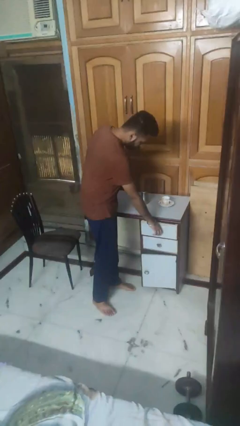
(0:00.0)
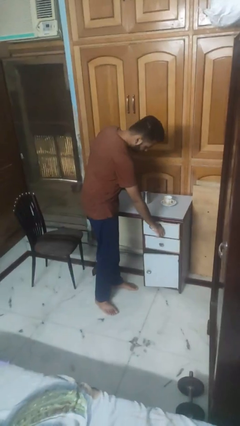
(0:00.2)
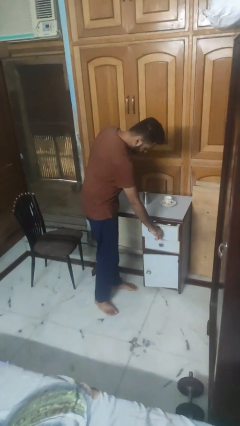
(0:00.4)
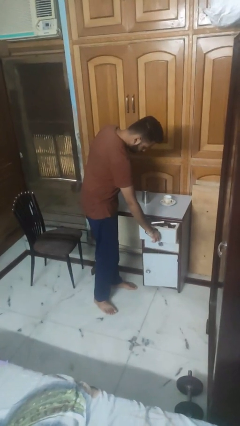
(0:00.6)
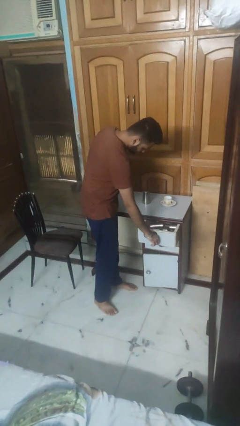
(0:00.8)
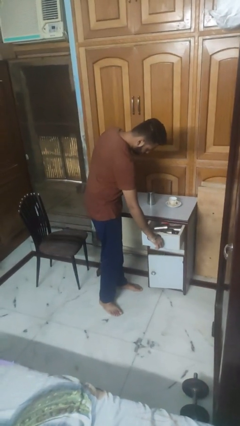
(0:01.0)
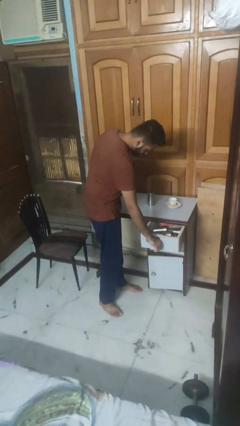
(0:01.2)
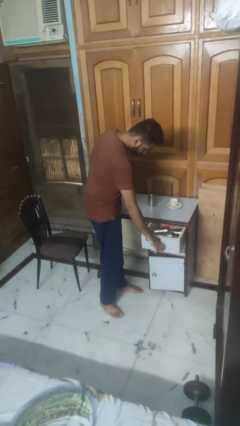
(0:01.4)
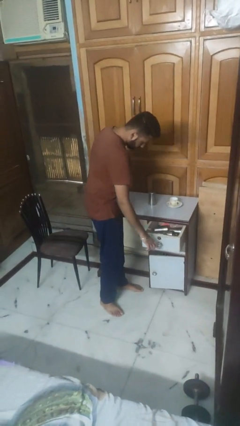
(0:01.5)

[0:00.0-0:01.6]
person opens kitchen drawer

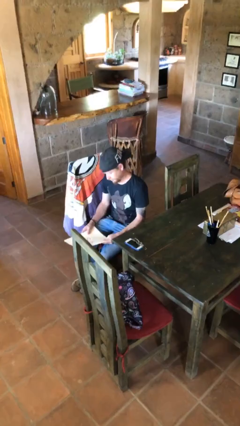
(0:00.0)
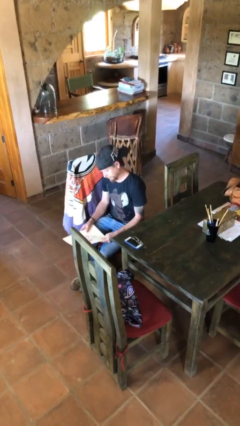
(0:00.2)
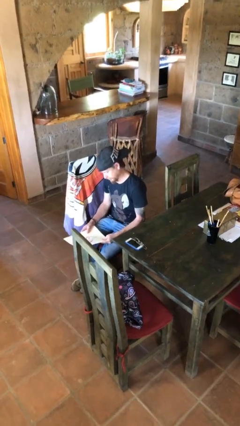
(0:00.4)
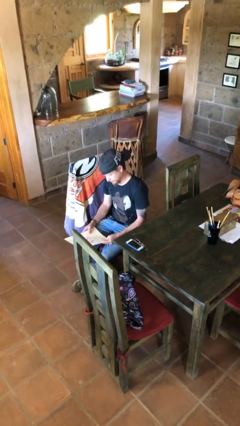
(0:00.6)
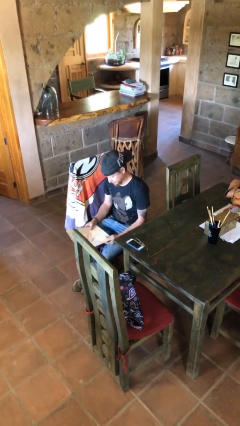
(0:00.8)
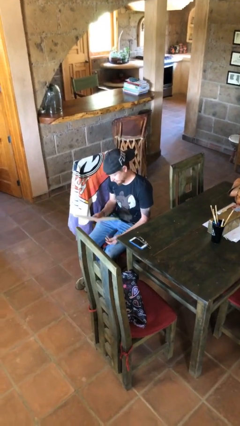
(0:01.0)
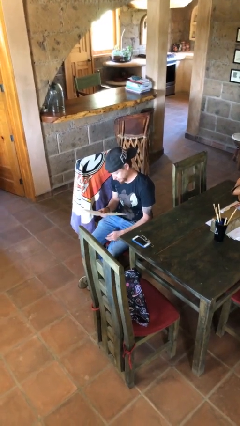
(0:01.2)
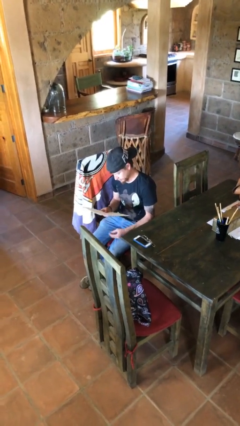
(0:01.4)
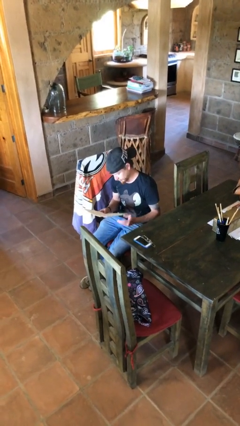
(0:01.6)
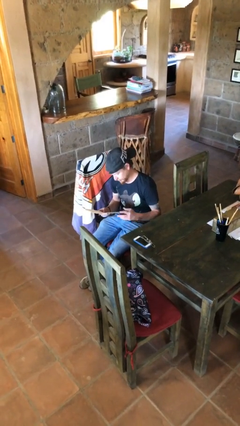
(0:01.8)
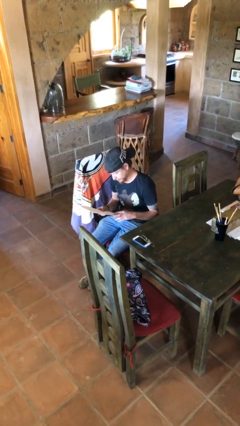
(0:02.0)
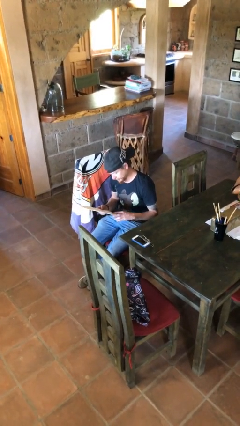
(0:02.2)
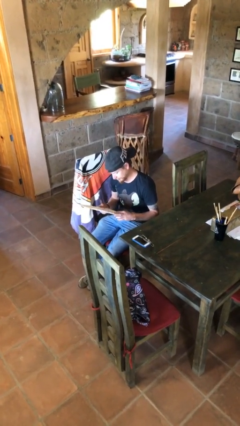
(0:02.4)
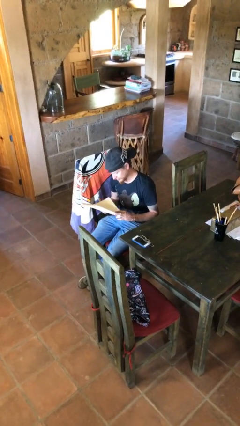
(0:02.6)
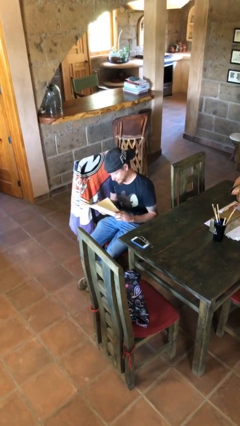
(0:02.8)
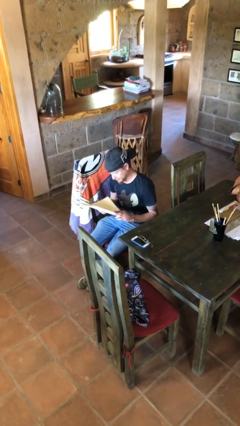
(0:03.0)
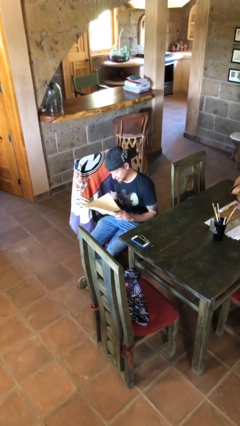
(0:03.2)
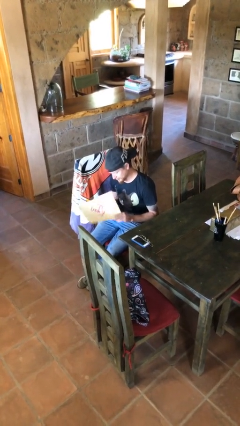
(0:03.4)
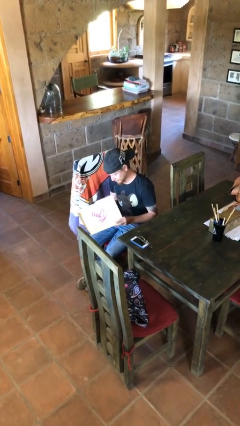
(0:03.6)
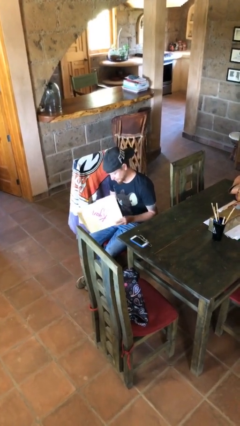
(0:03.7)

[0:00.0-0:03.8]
person reads document

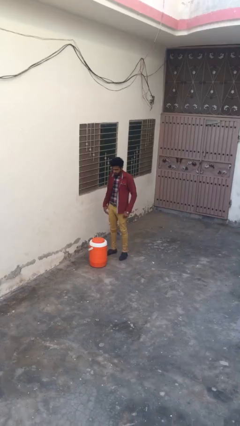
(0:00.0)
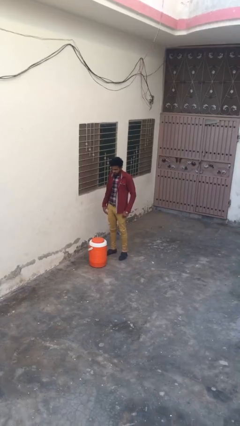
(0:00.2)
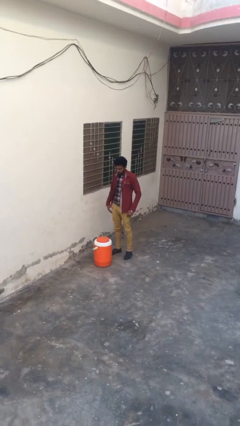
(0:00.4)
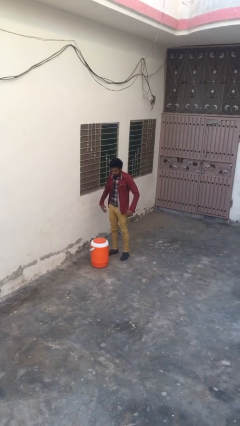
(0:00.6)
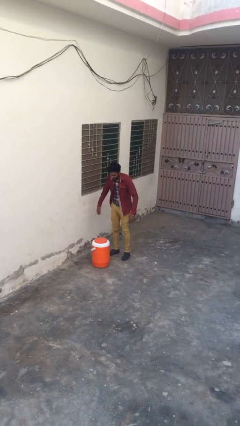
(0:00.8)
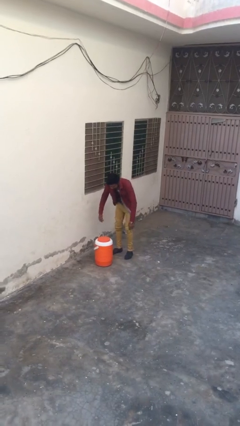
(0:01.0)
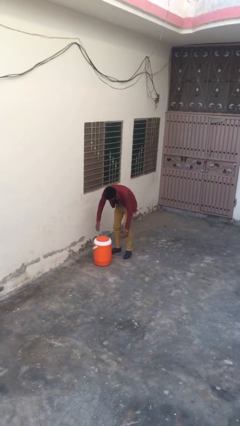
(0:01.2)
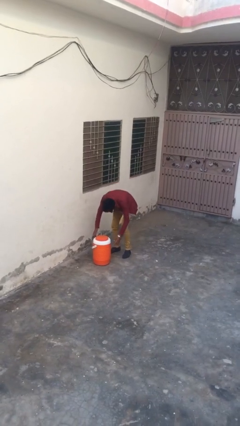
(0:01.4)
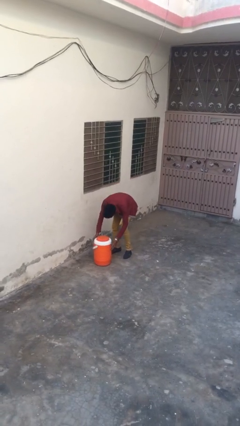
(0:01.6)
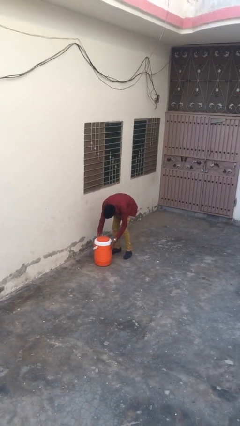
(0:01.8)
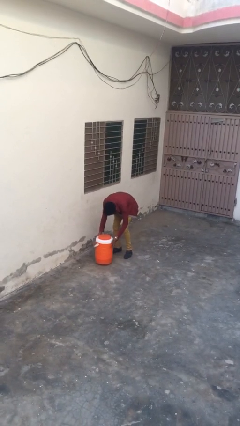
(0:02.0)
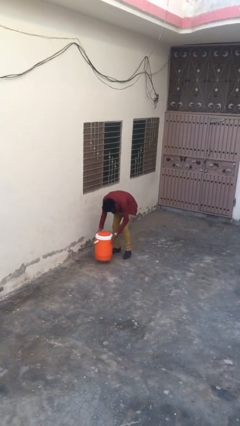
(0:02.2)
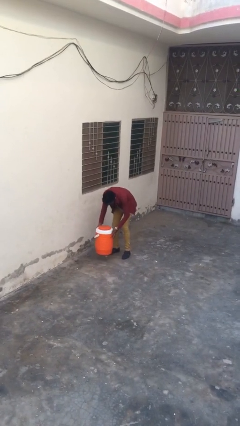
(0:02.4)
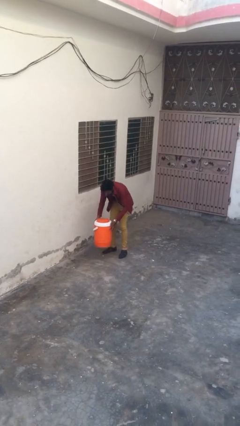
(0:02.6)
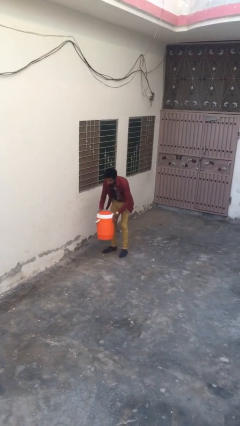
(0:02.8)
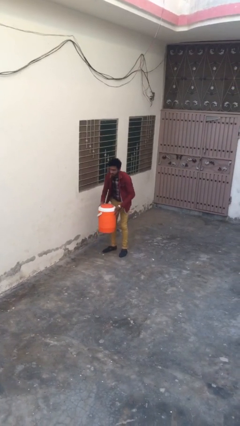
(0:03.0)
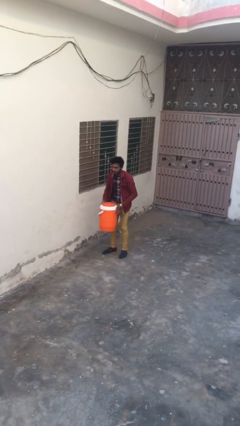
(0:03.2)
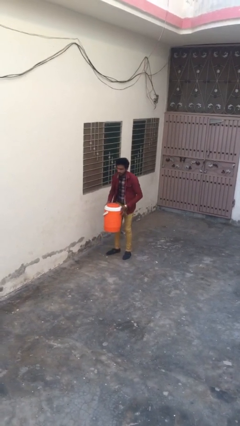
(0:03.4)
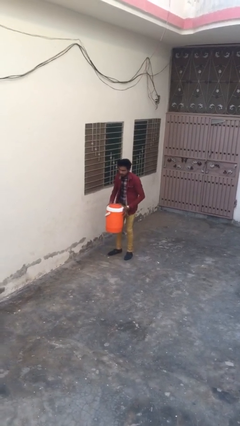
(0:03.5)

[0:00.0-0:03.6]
person picks up object from floor

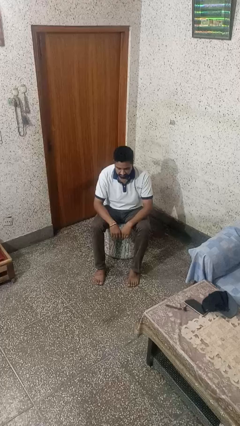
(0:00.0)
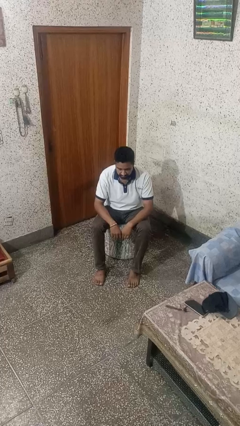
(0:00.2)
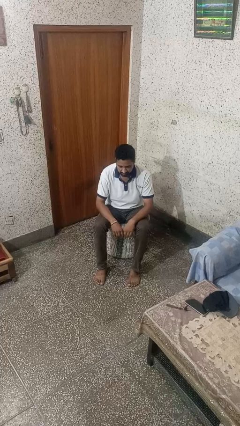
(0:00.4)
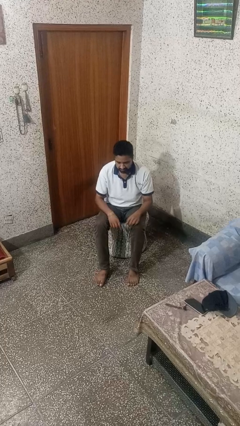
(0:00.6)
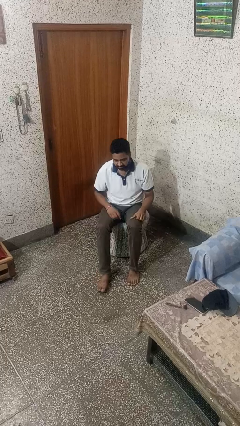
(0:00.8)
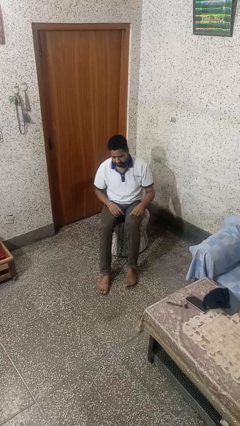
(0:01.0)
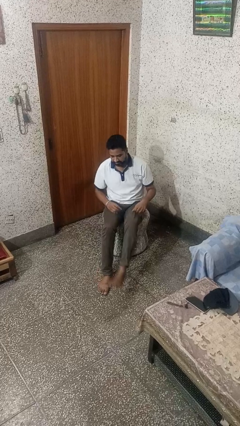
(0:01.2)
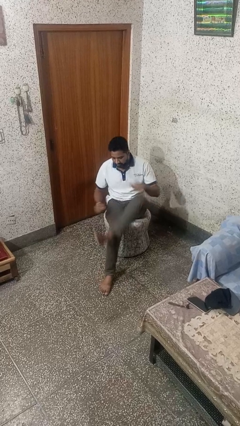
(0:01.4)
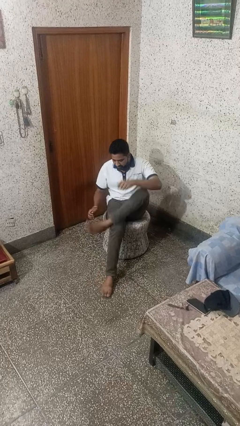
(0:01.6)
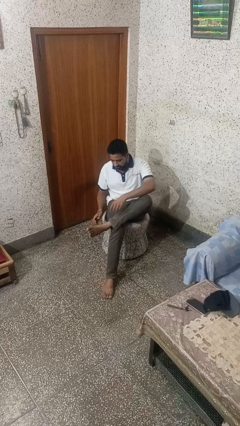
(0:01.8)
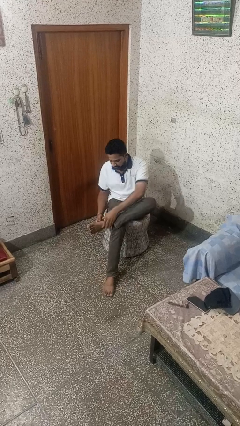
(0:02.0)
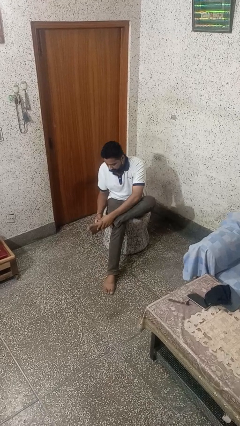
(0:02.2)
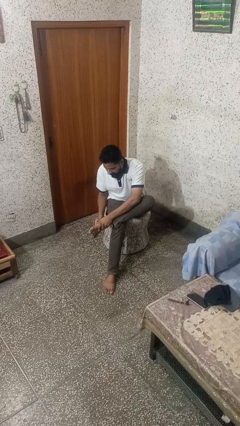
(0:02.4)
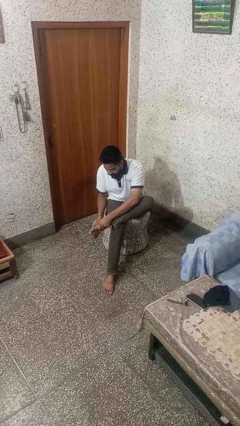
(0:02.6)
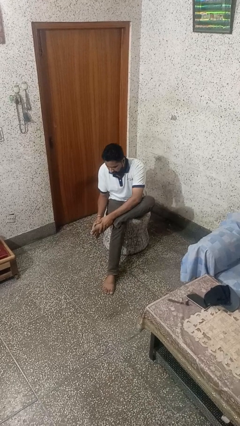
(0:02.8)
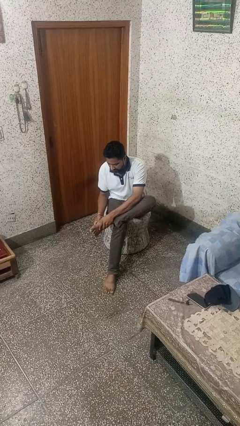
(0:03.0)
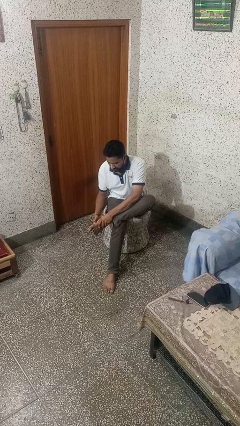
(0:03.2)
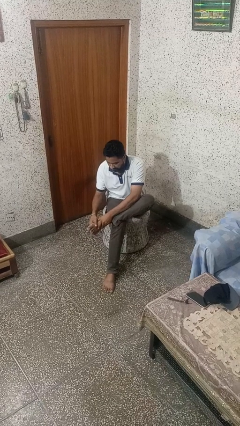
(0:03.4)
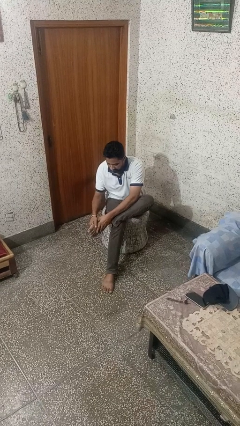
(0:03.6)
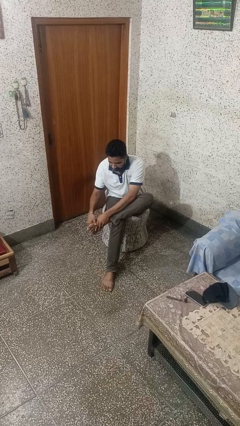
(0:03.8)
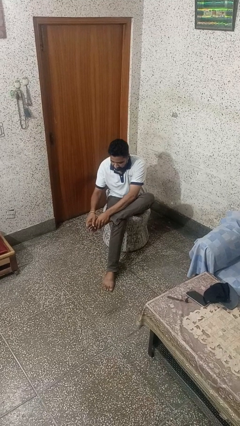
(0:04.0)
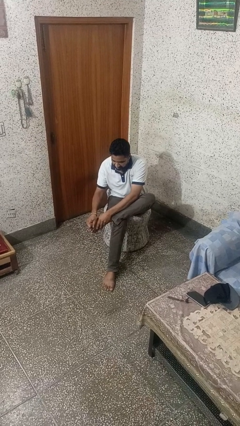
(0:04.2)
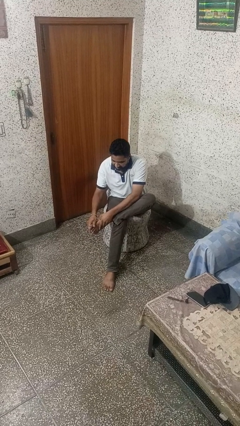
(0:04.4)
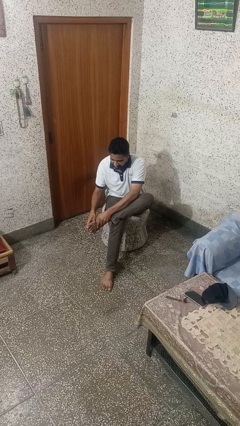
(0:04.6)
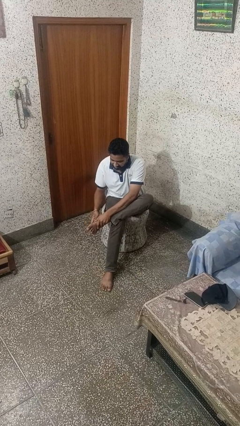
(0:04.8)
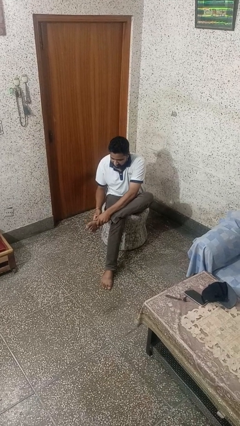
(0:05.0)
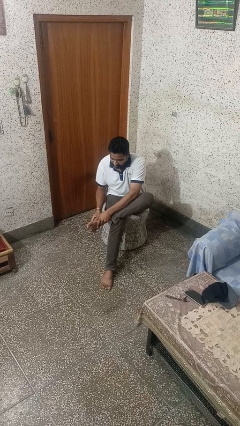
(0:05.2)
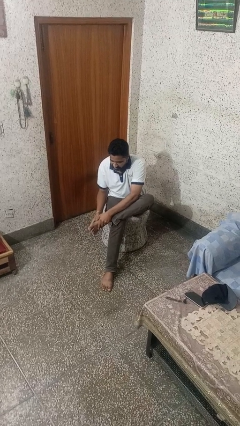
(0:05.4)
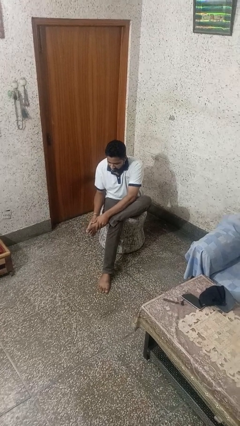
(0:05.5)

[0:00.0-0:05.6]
person rubs foot

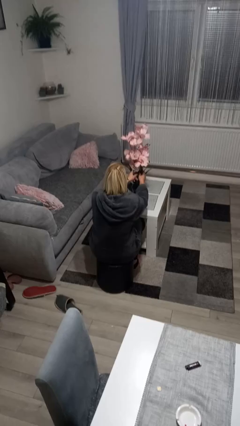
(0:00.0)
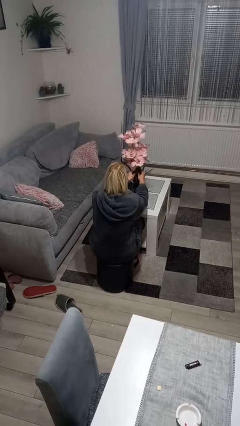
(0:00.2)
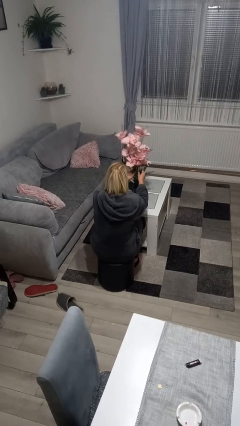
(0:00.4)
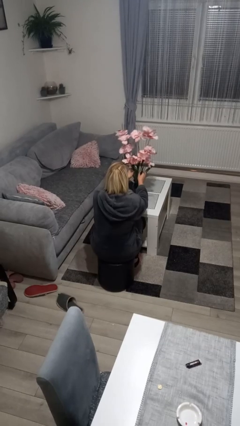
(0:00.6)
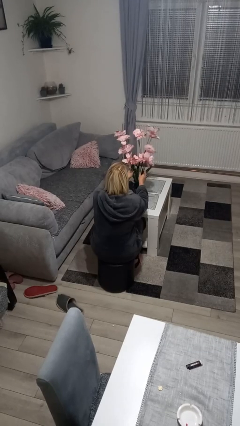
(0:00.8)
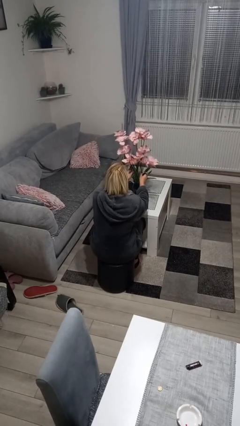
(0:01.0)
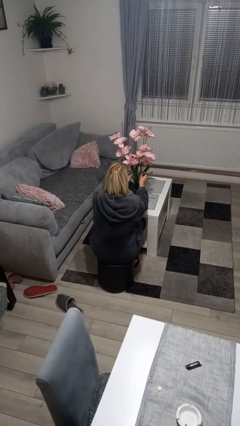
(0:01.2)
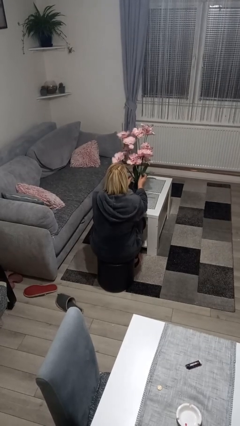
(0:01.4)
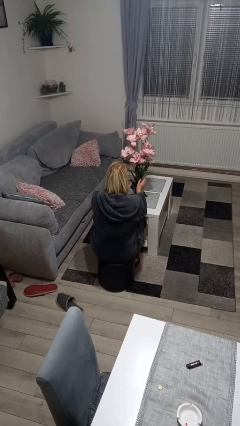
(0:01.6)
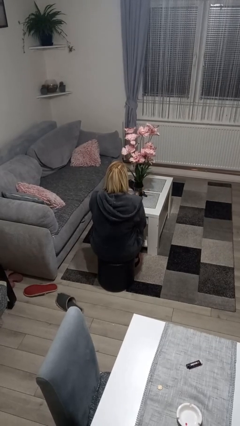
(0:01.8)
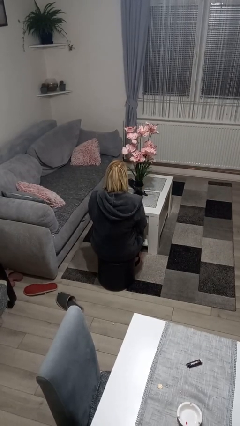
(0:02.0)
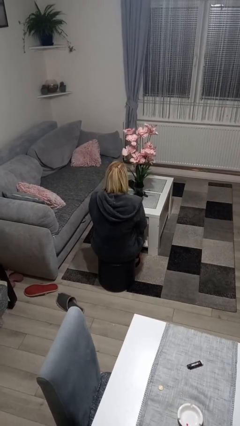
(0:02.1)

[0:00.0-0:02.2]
person arranges flowers in vase

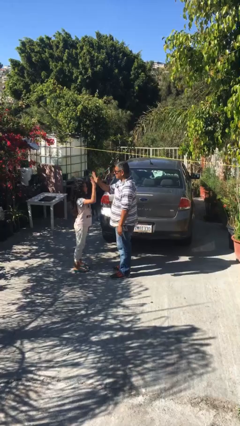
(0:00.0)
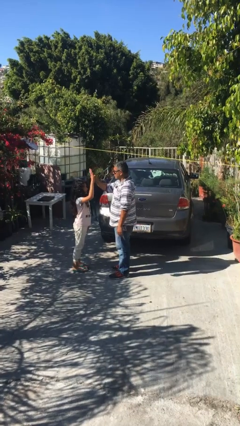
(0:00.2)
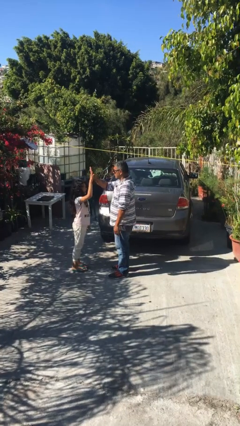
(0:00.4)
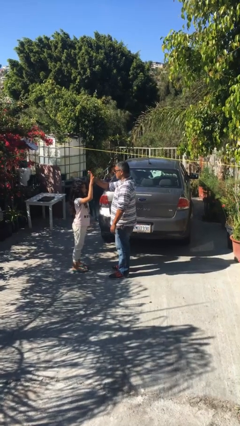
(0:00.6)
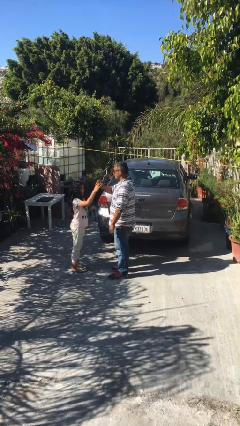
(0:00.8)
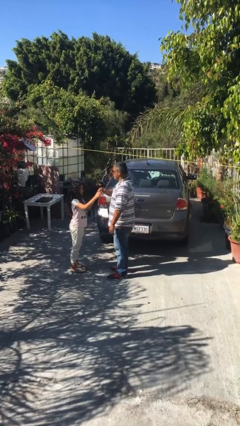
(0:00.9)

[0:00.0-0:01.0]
person highfives hand

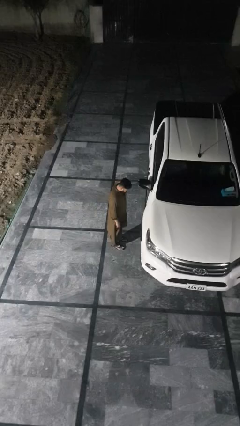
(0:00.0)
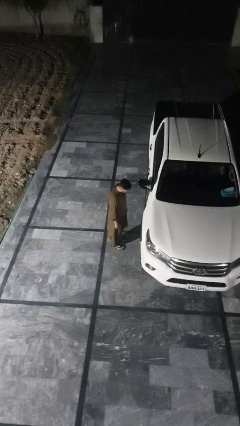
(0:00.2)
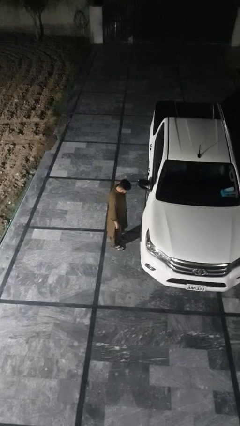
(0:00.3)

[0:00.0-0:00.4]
person kicks car tires
